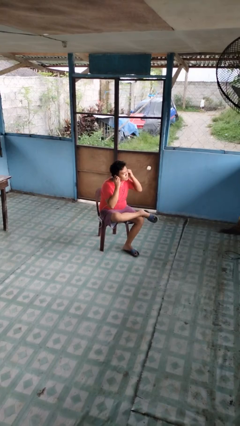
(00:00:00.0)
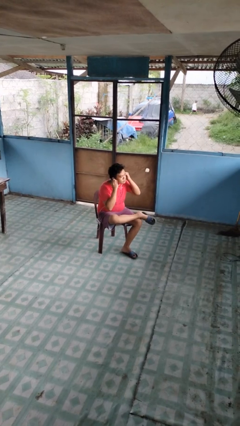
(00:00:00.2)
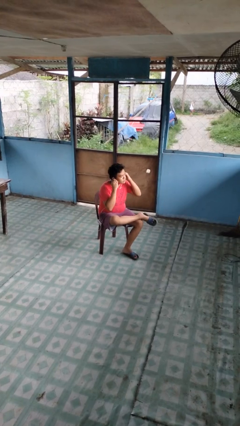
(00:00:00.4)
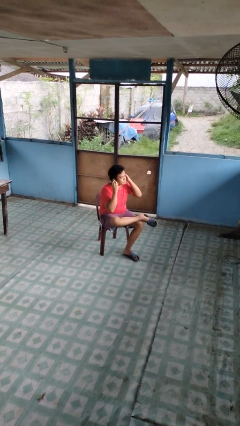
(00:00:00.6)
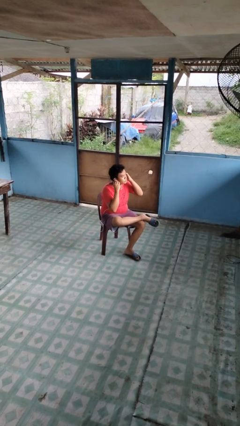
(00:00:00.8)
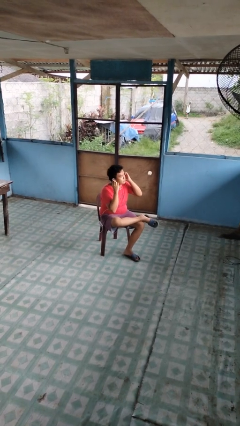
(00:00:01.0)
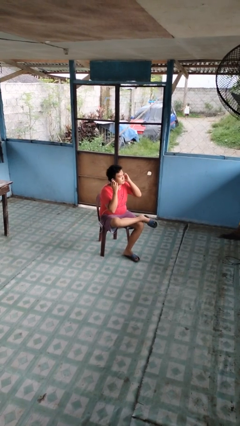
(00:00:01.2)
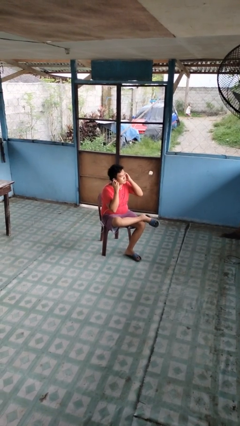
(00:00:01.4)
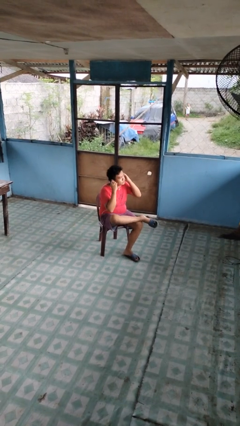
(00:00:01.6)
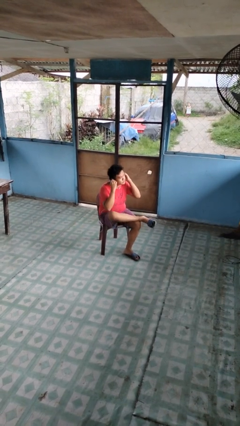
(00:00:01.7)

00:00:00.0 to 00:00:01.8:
person puts on headphones

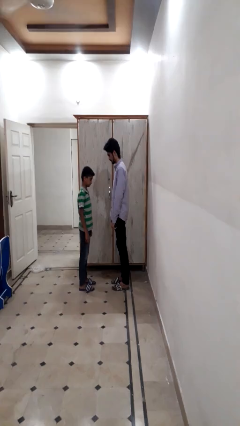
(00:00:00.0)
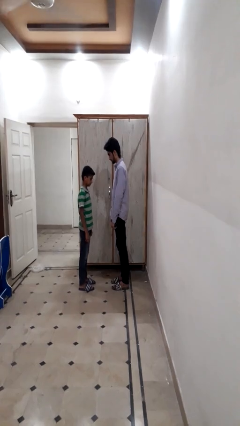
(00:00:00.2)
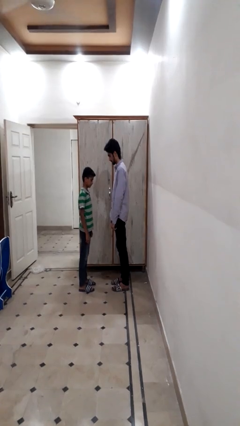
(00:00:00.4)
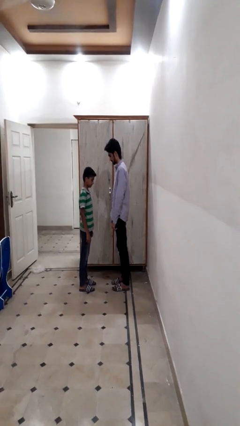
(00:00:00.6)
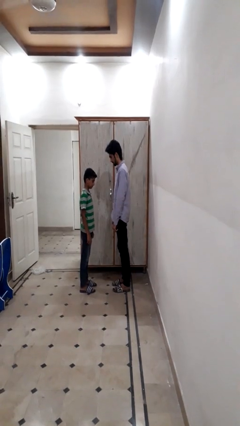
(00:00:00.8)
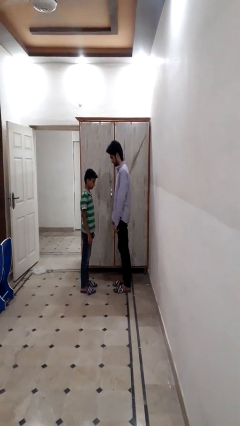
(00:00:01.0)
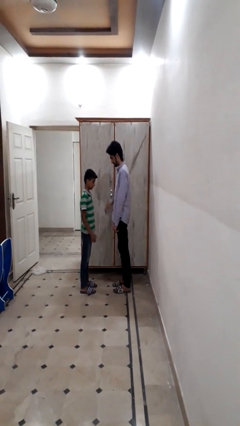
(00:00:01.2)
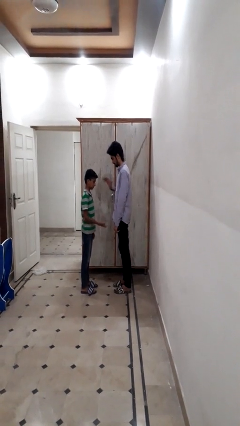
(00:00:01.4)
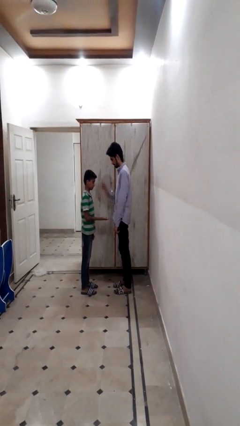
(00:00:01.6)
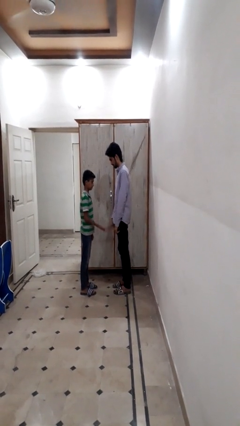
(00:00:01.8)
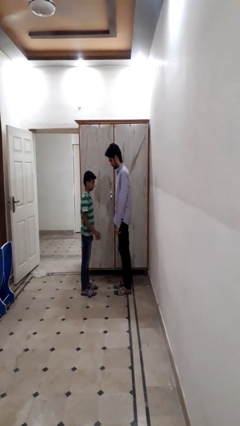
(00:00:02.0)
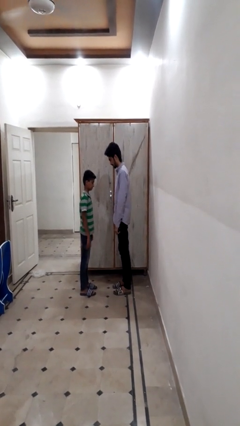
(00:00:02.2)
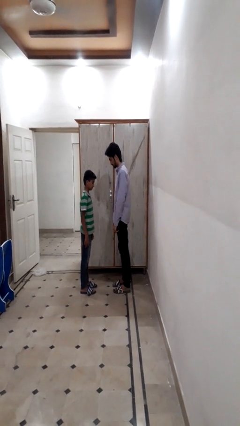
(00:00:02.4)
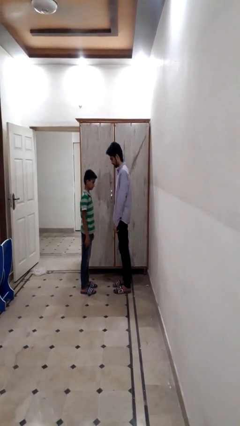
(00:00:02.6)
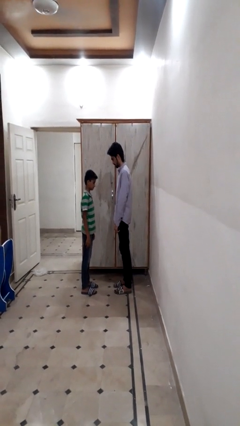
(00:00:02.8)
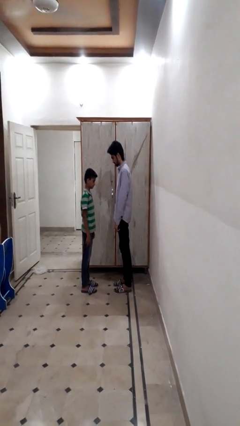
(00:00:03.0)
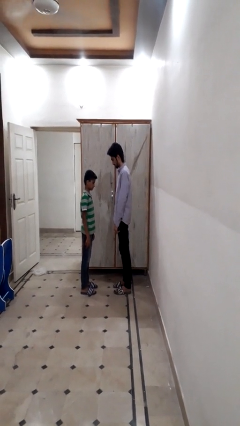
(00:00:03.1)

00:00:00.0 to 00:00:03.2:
person highfives hand

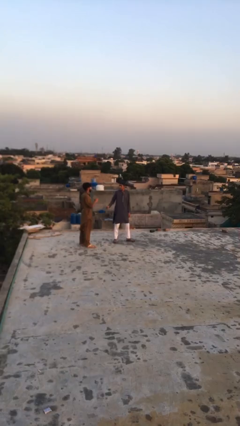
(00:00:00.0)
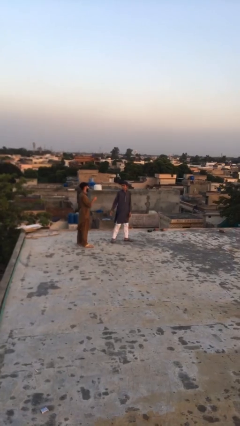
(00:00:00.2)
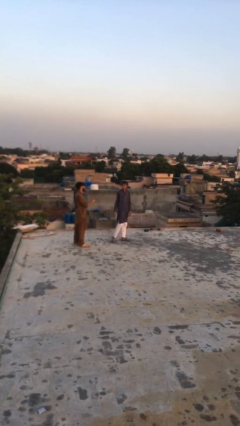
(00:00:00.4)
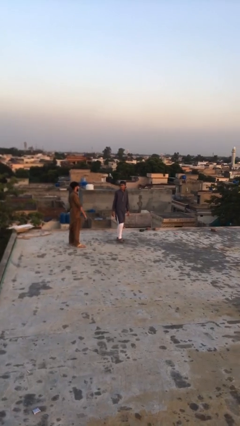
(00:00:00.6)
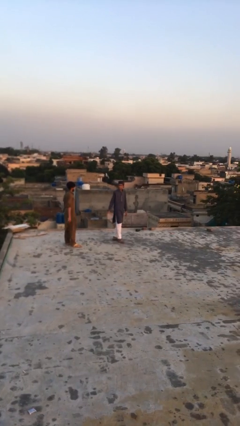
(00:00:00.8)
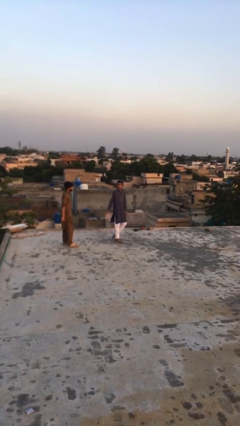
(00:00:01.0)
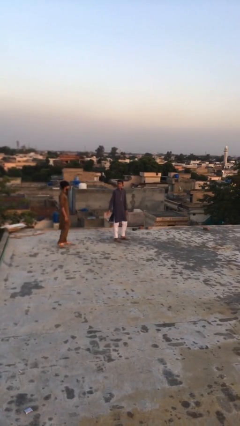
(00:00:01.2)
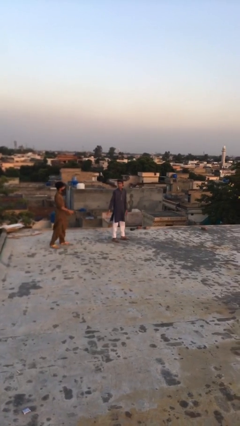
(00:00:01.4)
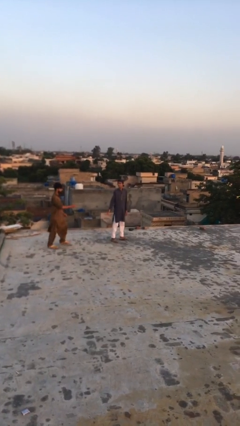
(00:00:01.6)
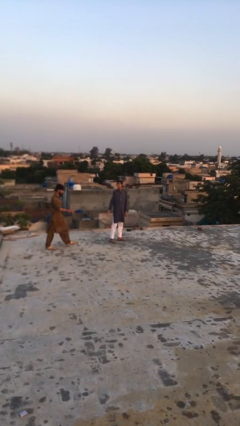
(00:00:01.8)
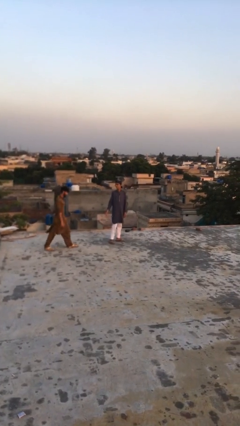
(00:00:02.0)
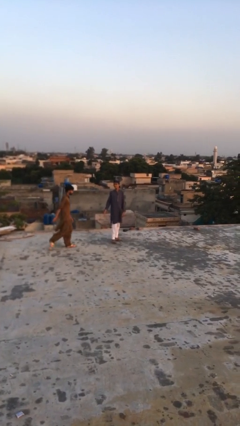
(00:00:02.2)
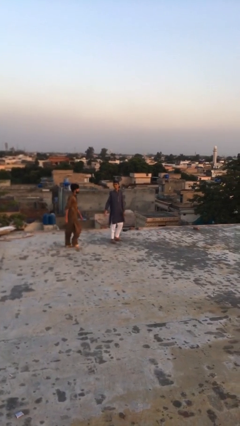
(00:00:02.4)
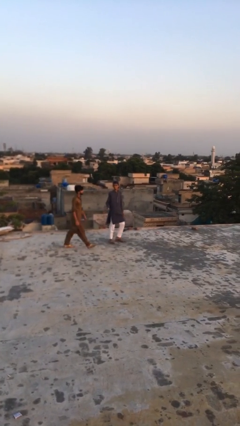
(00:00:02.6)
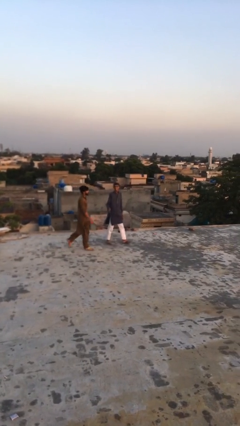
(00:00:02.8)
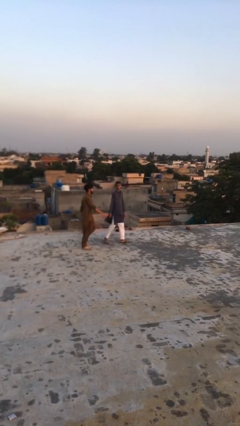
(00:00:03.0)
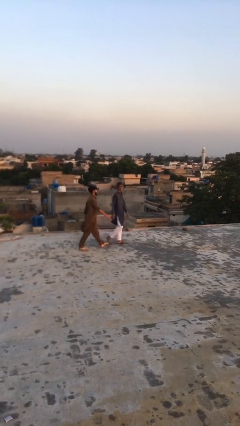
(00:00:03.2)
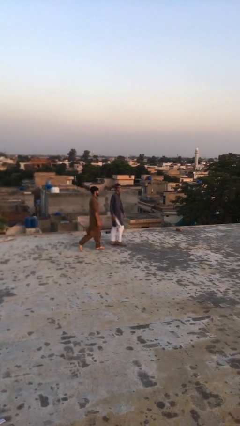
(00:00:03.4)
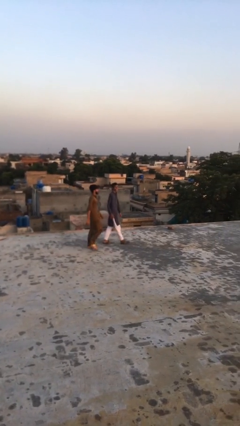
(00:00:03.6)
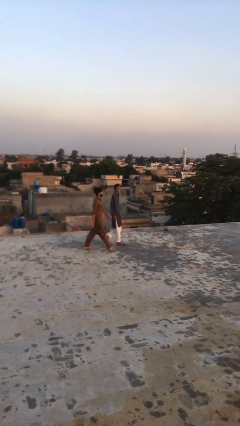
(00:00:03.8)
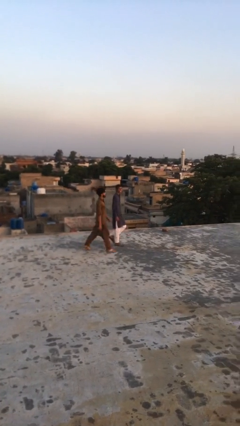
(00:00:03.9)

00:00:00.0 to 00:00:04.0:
person talks to person

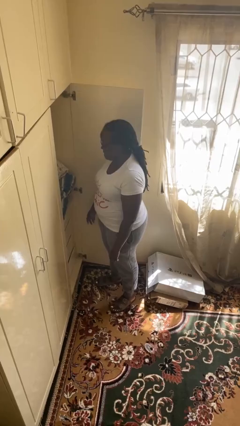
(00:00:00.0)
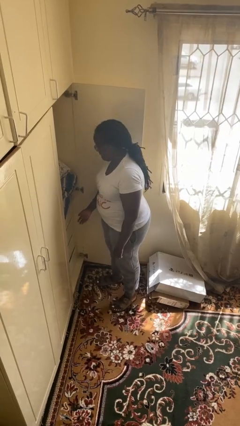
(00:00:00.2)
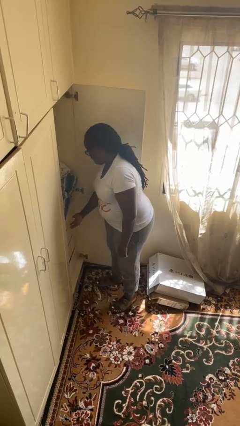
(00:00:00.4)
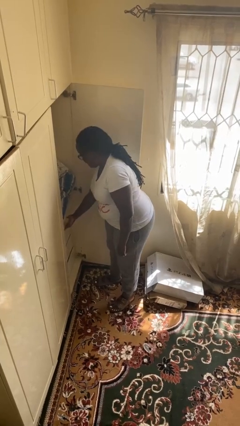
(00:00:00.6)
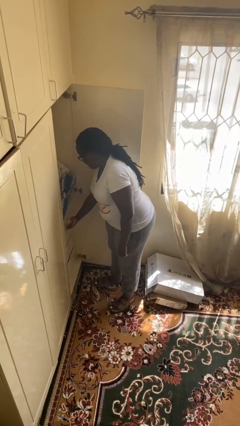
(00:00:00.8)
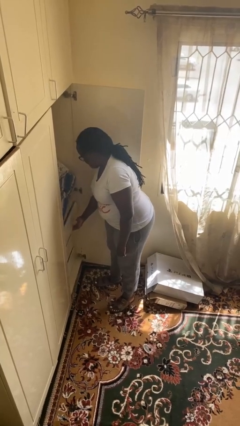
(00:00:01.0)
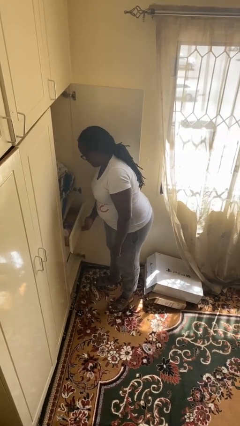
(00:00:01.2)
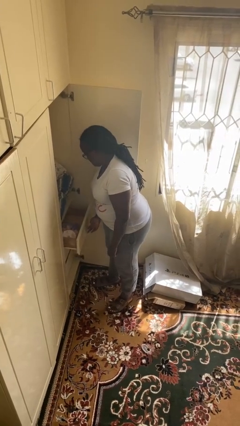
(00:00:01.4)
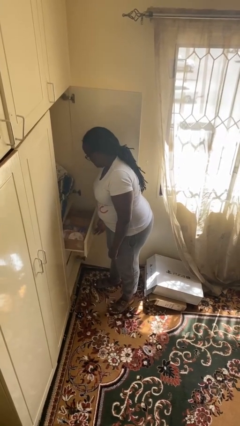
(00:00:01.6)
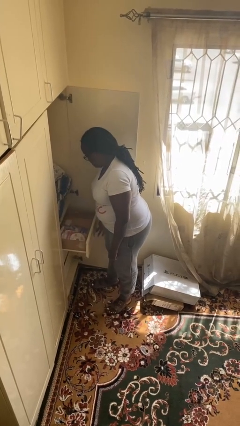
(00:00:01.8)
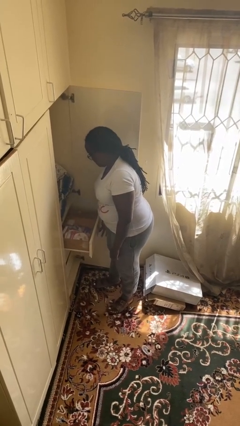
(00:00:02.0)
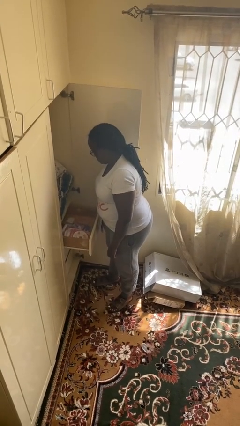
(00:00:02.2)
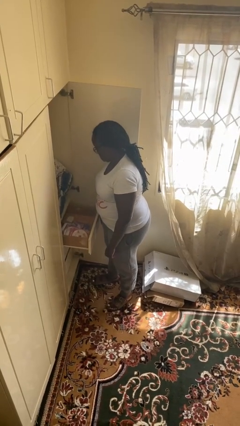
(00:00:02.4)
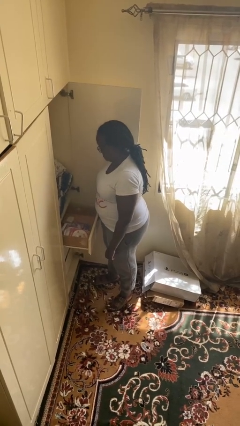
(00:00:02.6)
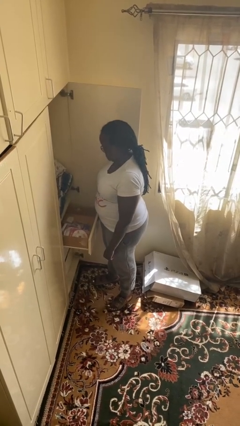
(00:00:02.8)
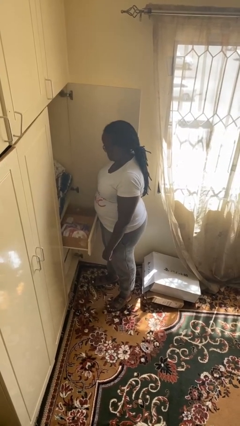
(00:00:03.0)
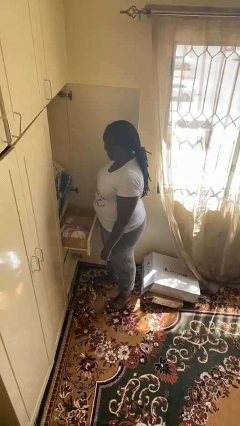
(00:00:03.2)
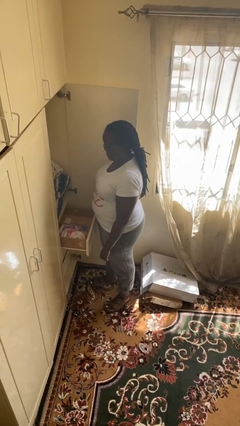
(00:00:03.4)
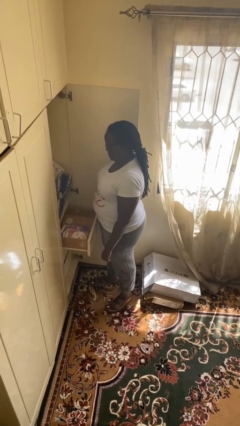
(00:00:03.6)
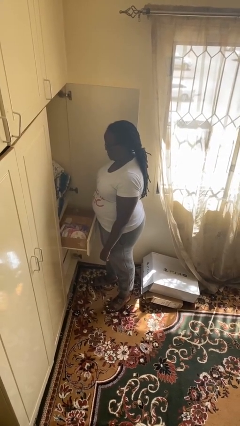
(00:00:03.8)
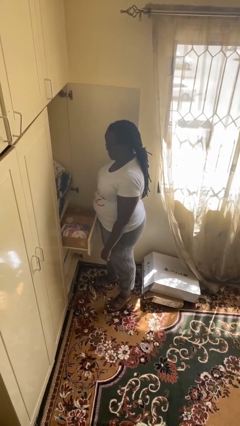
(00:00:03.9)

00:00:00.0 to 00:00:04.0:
person opens dresser drawer

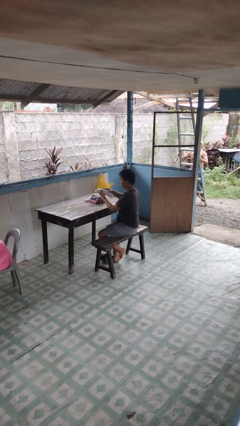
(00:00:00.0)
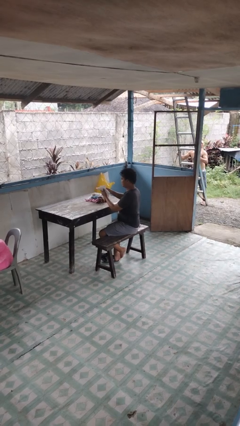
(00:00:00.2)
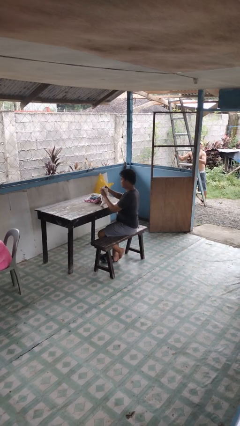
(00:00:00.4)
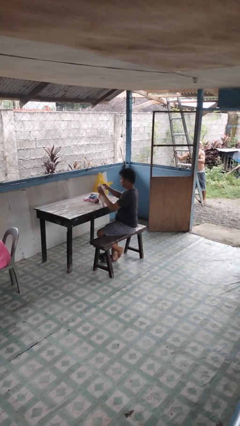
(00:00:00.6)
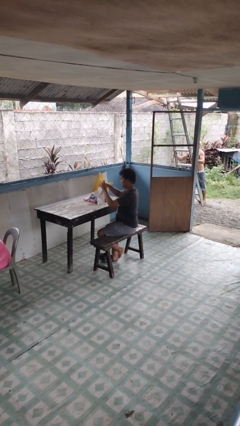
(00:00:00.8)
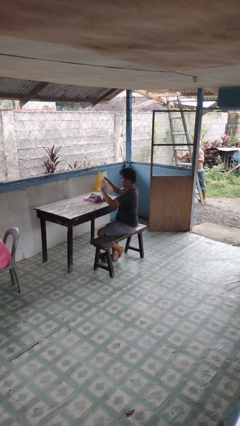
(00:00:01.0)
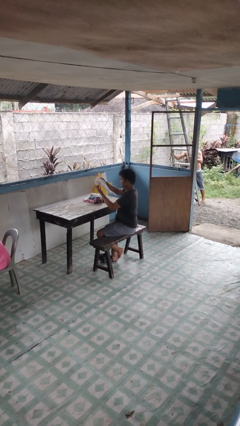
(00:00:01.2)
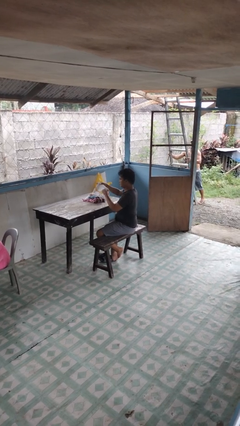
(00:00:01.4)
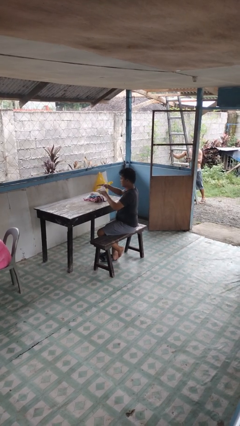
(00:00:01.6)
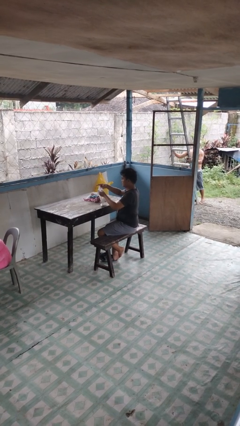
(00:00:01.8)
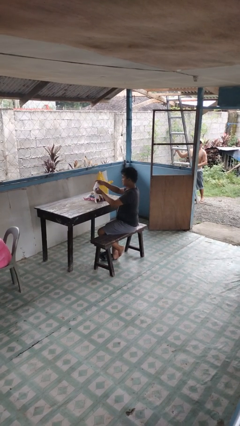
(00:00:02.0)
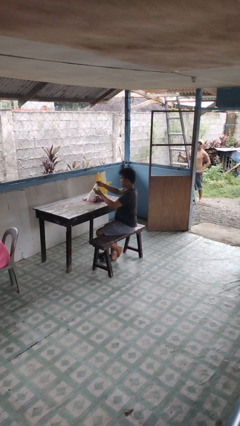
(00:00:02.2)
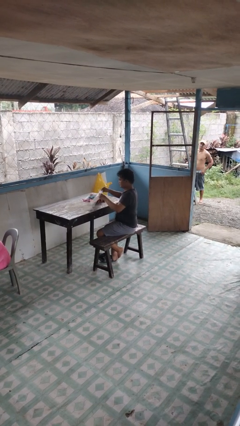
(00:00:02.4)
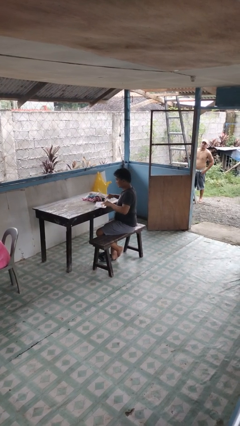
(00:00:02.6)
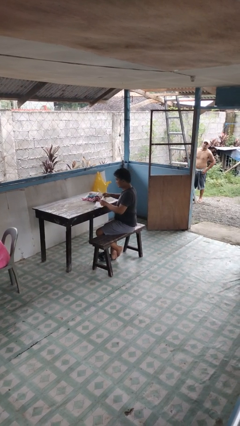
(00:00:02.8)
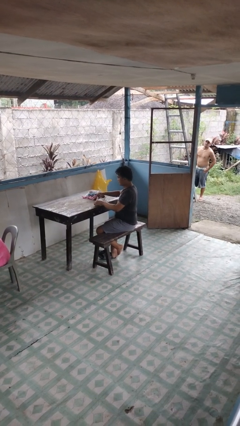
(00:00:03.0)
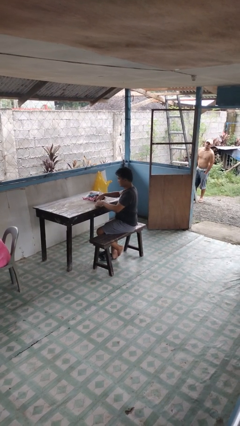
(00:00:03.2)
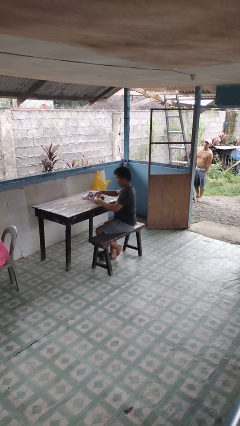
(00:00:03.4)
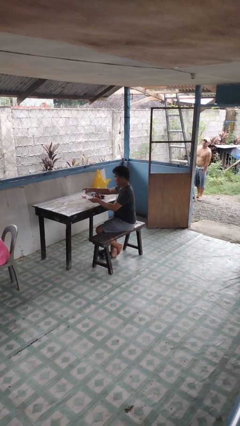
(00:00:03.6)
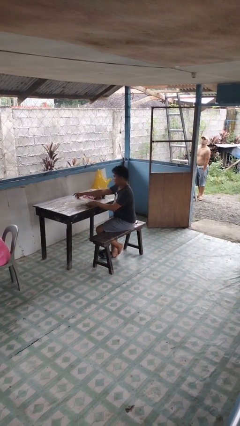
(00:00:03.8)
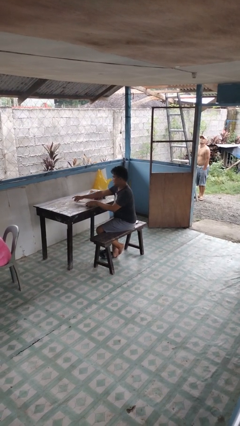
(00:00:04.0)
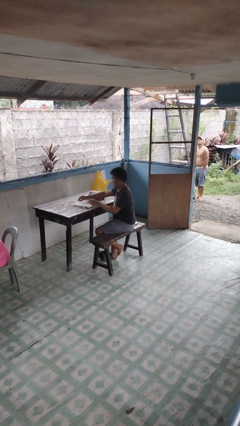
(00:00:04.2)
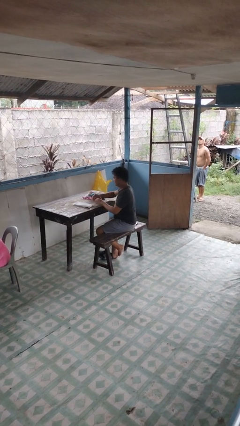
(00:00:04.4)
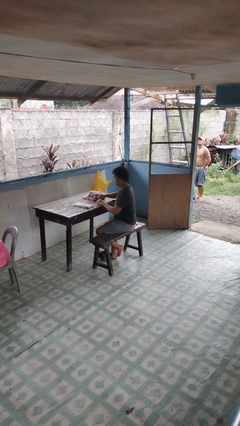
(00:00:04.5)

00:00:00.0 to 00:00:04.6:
person folds towel
